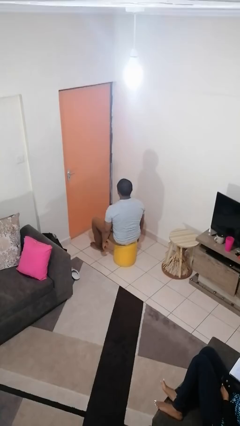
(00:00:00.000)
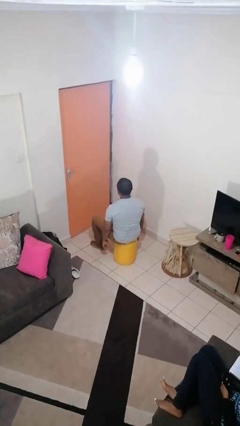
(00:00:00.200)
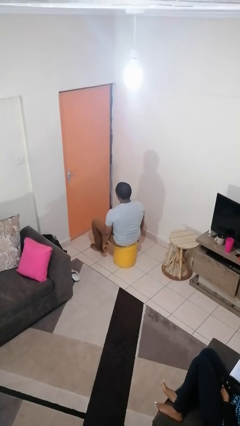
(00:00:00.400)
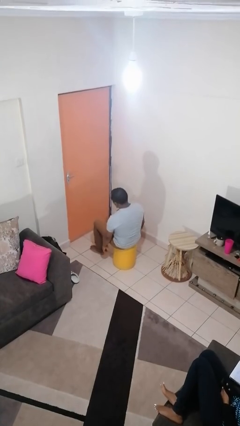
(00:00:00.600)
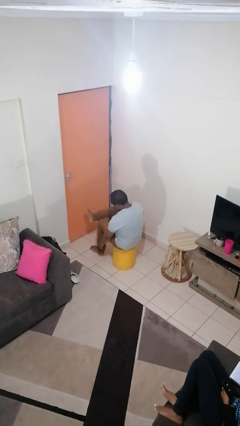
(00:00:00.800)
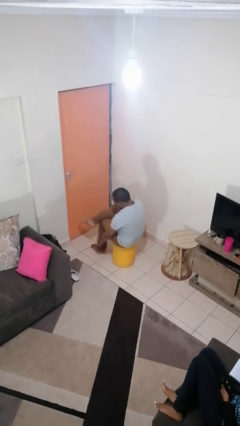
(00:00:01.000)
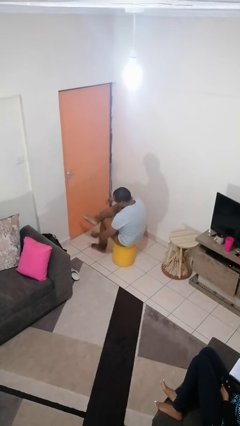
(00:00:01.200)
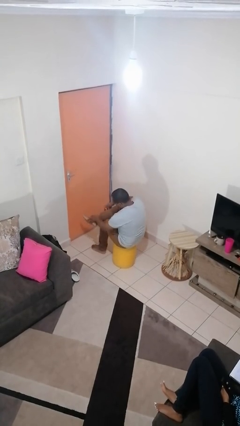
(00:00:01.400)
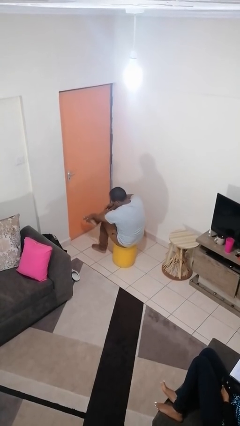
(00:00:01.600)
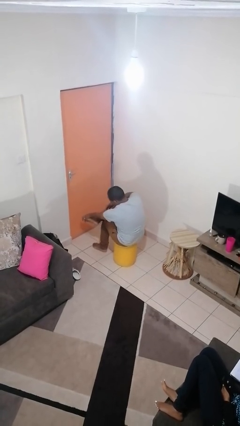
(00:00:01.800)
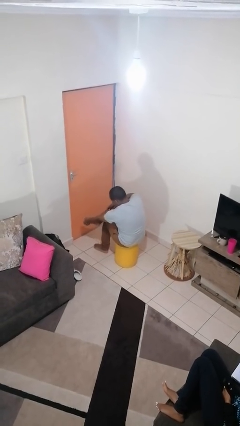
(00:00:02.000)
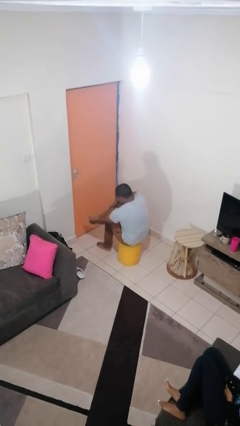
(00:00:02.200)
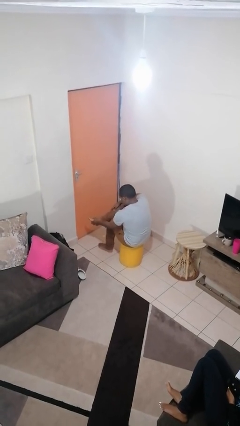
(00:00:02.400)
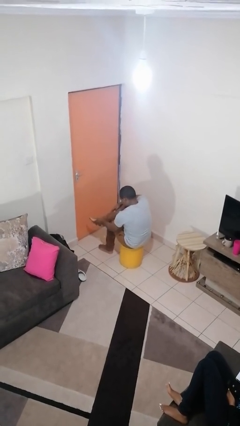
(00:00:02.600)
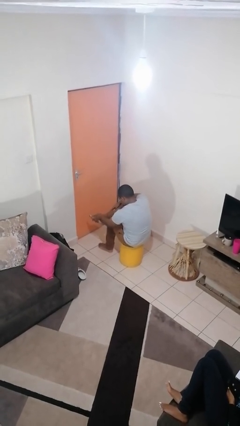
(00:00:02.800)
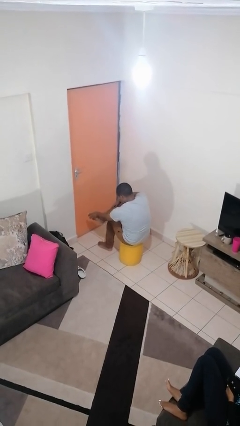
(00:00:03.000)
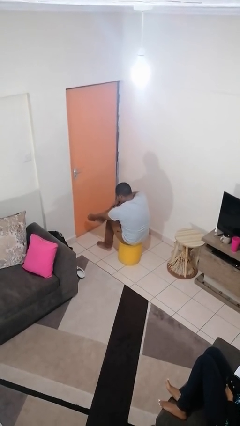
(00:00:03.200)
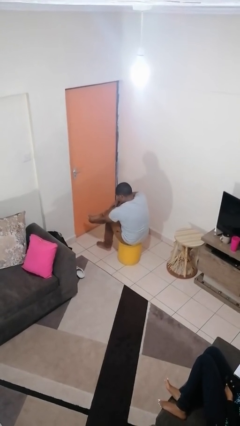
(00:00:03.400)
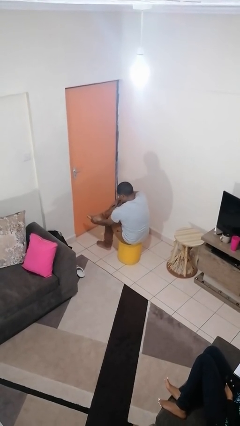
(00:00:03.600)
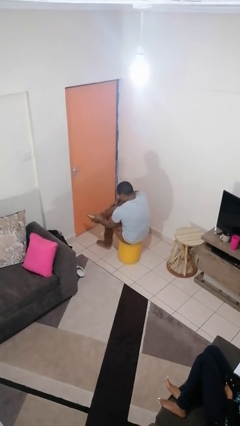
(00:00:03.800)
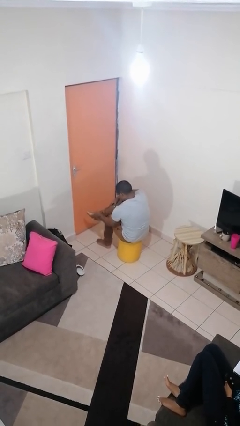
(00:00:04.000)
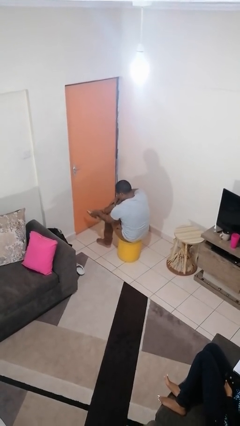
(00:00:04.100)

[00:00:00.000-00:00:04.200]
person rubs foot

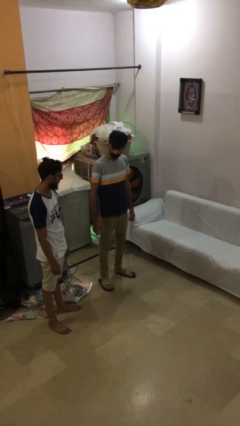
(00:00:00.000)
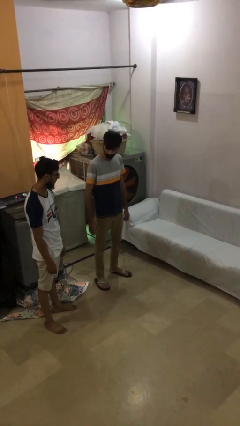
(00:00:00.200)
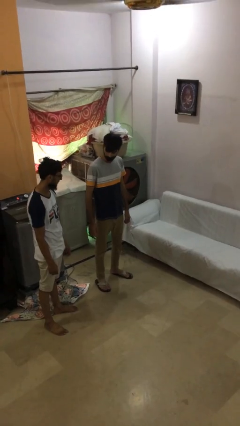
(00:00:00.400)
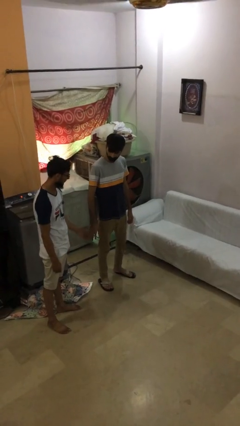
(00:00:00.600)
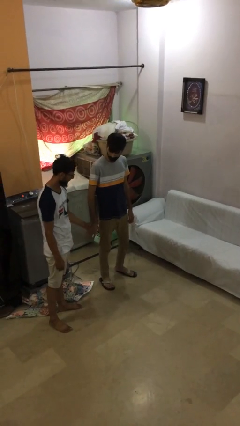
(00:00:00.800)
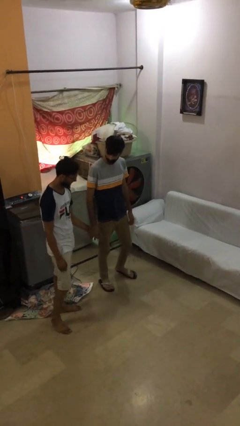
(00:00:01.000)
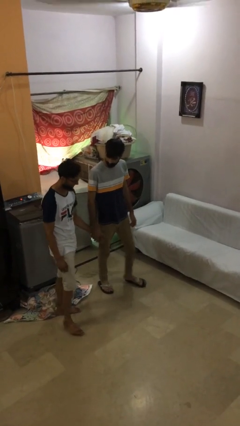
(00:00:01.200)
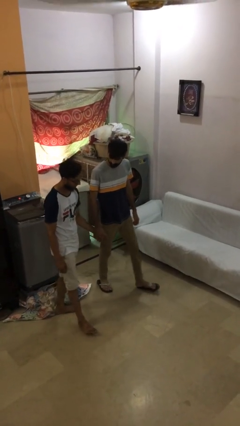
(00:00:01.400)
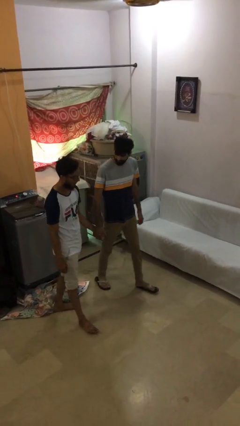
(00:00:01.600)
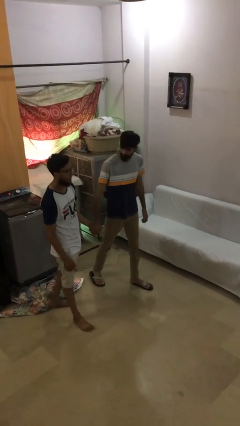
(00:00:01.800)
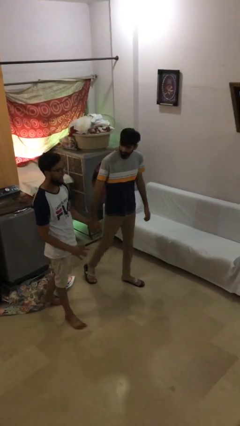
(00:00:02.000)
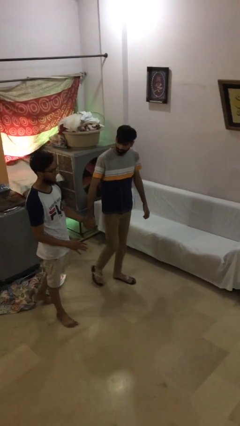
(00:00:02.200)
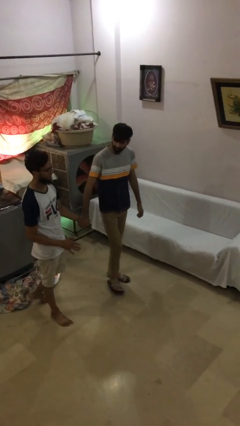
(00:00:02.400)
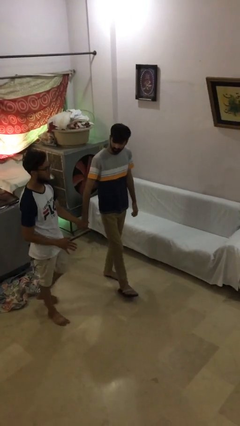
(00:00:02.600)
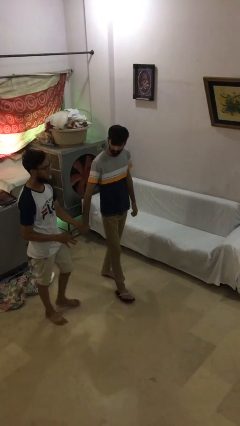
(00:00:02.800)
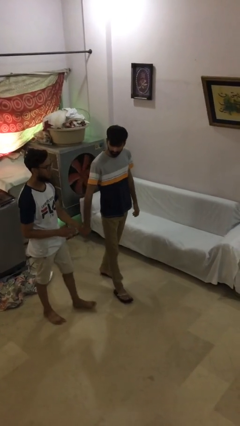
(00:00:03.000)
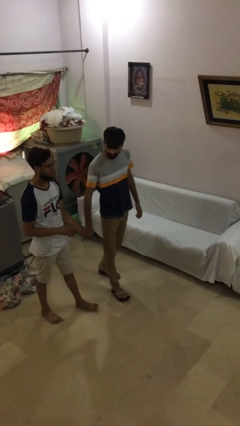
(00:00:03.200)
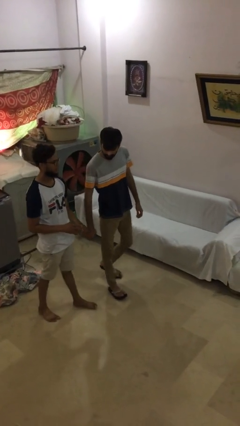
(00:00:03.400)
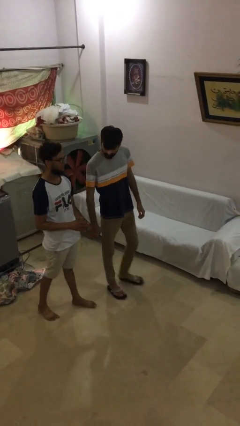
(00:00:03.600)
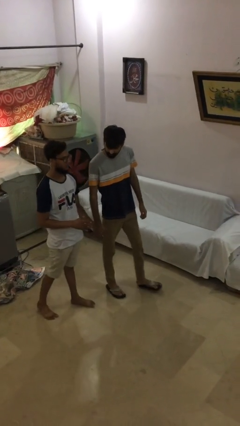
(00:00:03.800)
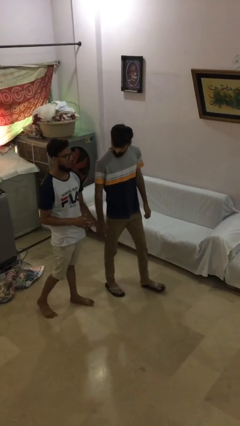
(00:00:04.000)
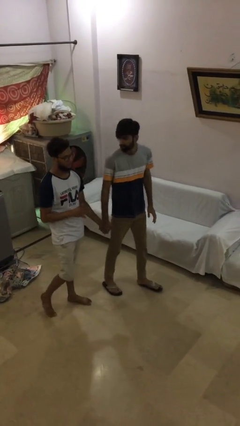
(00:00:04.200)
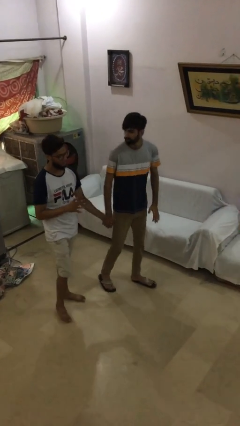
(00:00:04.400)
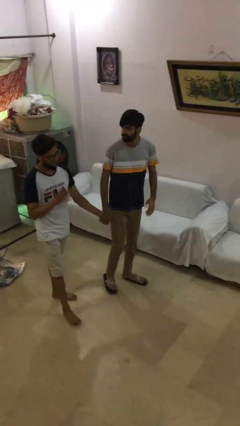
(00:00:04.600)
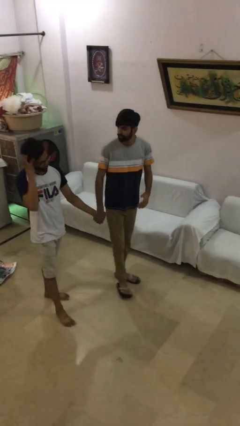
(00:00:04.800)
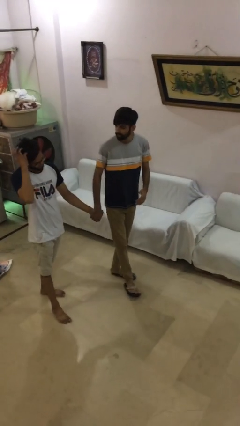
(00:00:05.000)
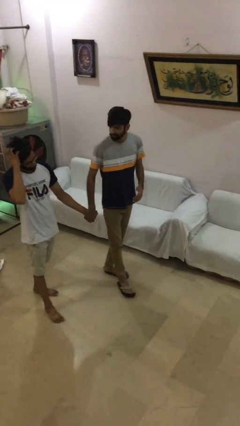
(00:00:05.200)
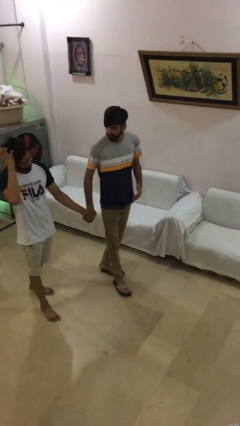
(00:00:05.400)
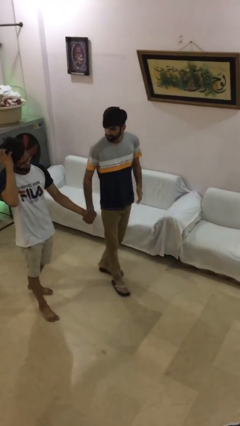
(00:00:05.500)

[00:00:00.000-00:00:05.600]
person holds hand

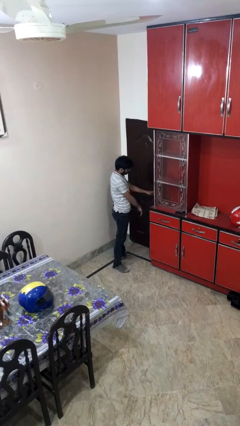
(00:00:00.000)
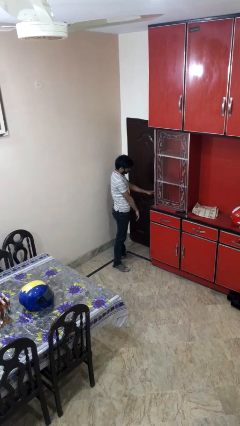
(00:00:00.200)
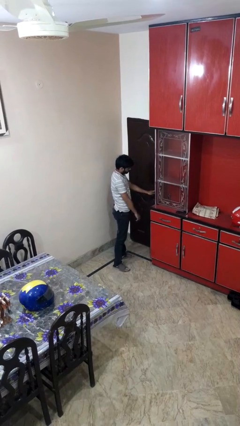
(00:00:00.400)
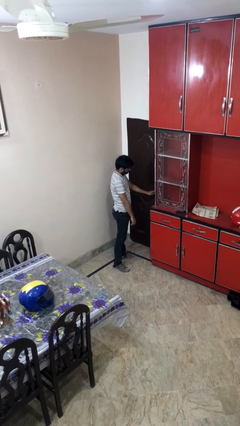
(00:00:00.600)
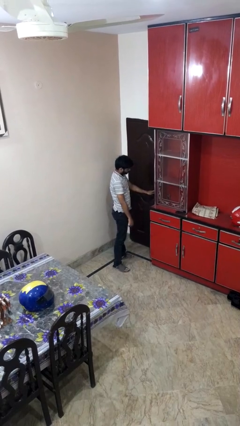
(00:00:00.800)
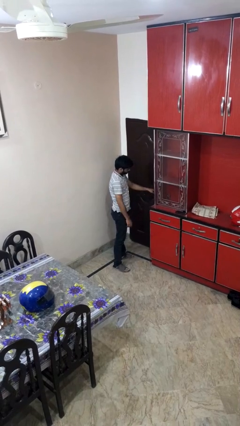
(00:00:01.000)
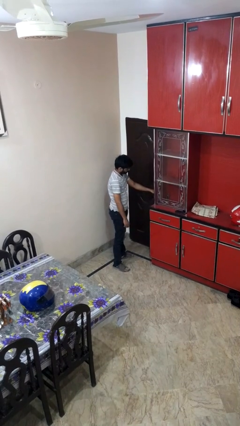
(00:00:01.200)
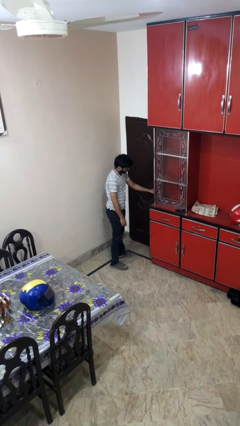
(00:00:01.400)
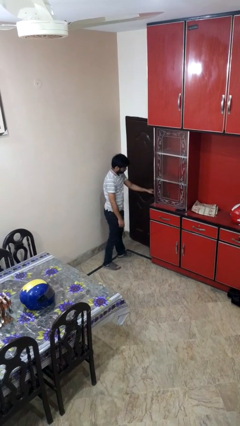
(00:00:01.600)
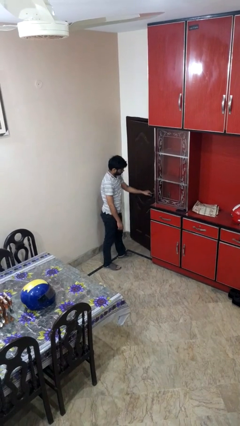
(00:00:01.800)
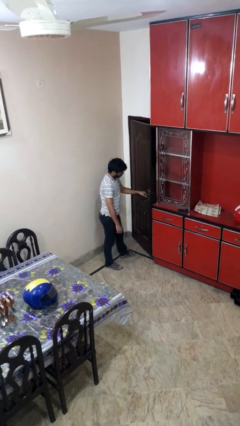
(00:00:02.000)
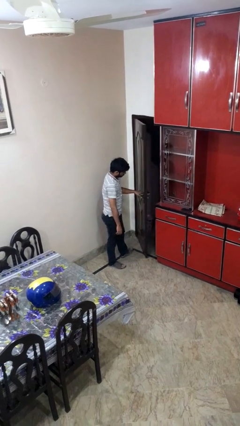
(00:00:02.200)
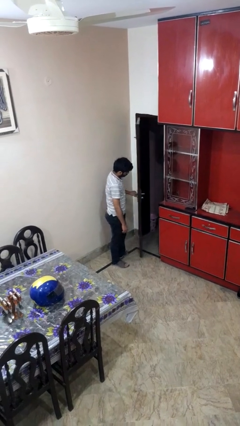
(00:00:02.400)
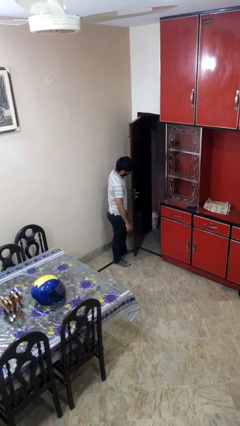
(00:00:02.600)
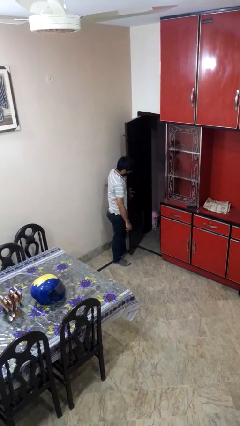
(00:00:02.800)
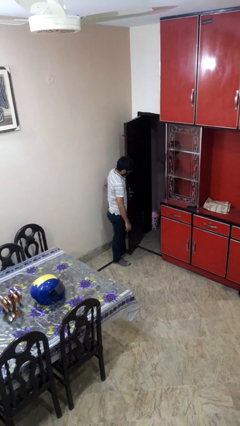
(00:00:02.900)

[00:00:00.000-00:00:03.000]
person opens facility door

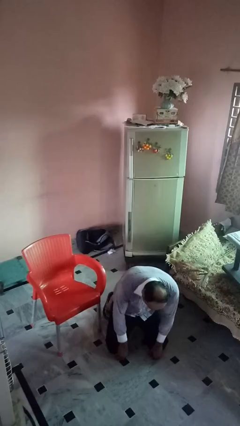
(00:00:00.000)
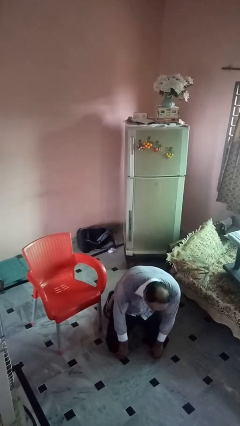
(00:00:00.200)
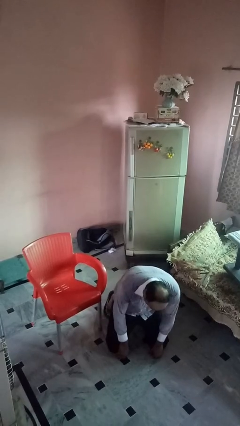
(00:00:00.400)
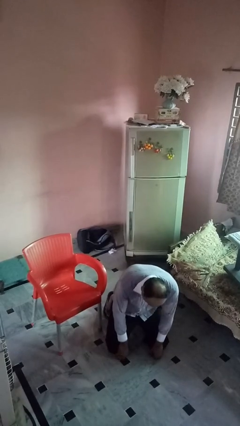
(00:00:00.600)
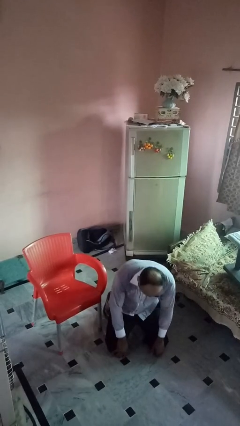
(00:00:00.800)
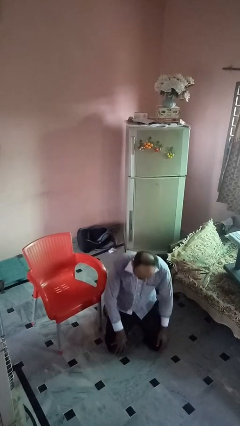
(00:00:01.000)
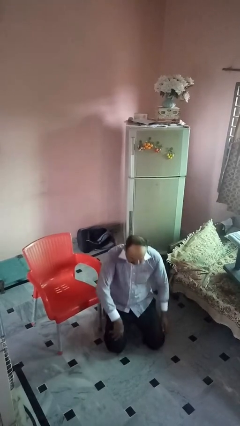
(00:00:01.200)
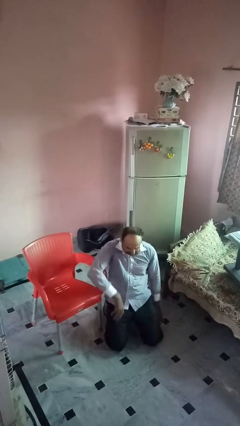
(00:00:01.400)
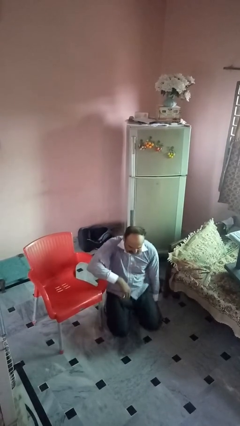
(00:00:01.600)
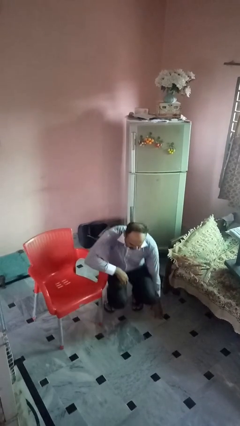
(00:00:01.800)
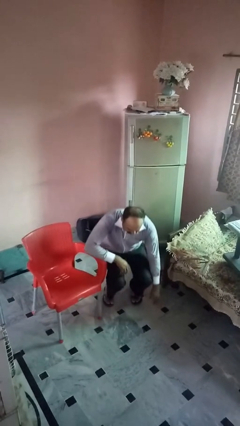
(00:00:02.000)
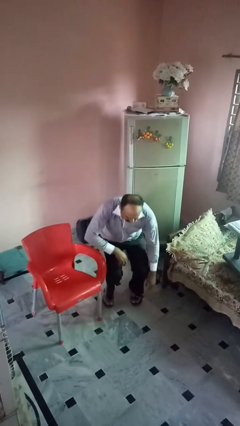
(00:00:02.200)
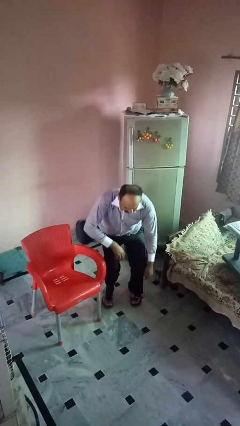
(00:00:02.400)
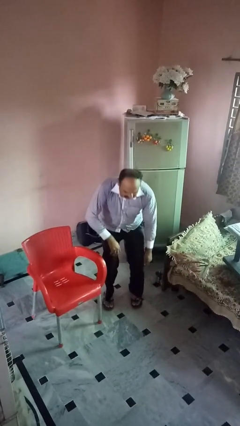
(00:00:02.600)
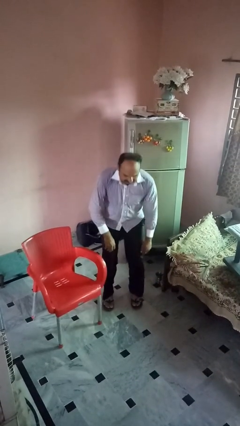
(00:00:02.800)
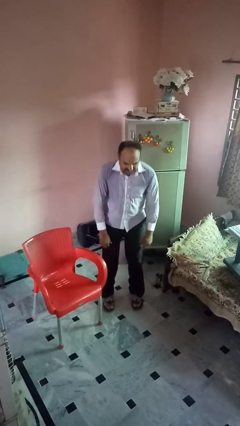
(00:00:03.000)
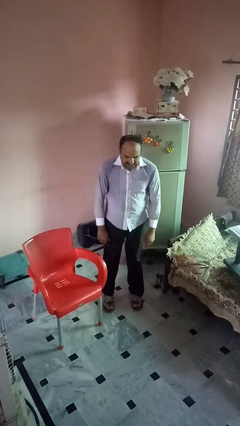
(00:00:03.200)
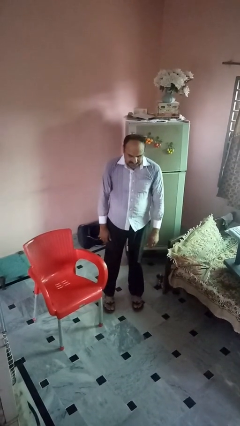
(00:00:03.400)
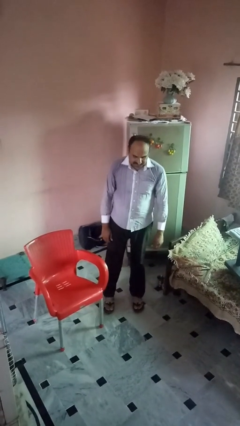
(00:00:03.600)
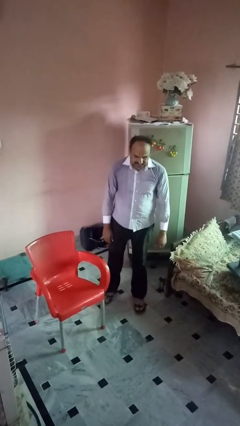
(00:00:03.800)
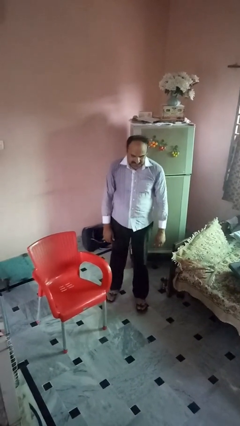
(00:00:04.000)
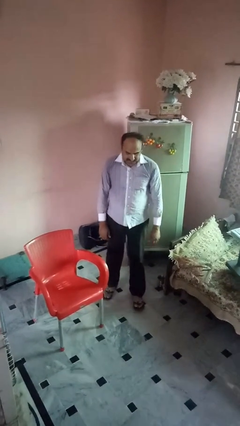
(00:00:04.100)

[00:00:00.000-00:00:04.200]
person stands up from floor

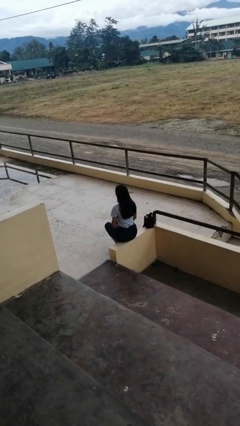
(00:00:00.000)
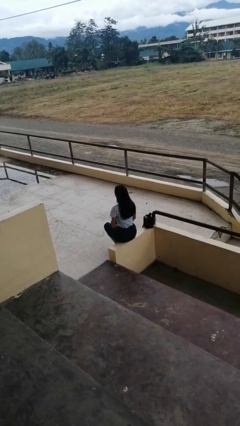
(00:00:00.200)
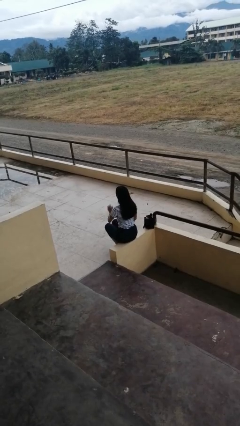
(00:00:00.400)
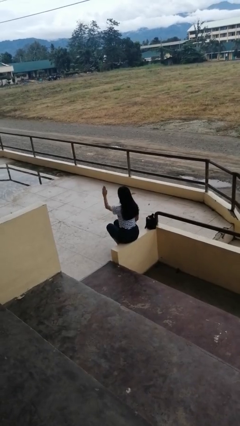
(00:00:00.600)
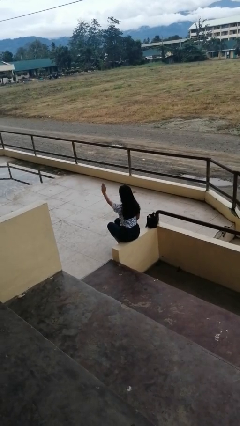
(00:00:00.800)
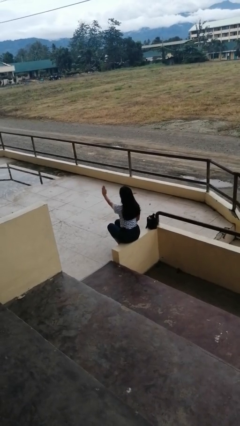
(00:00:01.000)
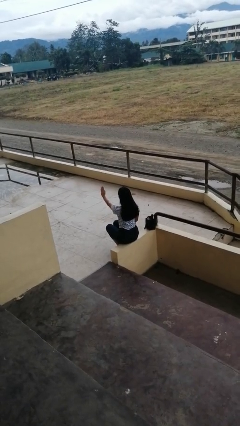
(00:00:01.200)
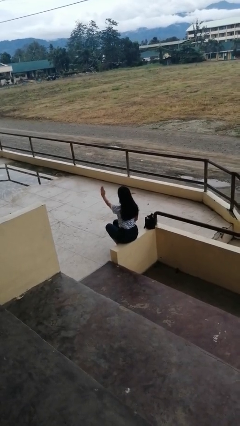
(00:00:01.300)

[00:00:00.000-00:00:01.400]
person gestures stop
